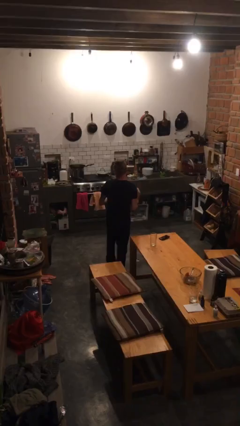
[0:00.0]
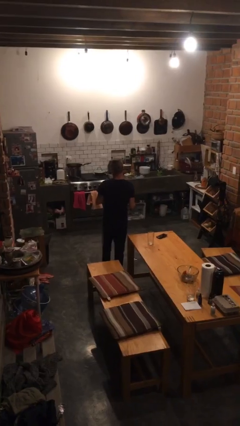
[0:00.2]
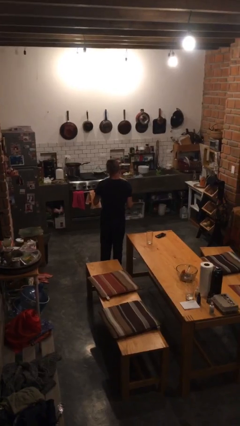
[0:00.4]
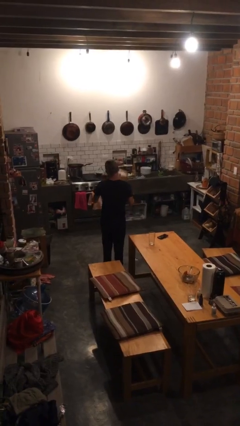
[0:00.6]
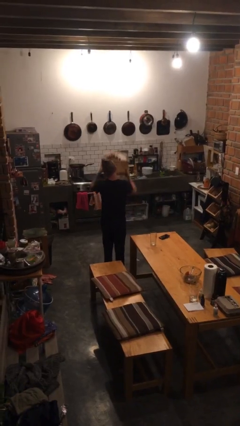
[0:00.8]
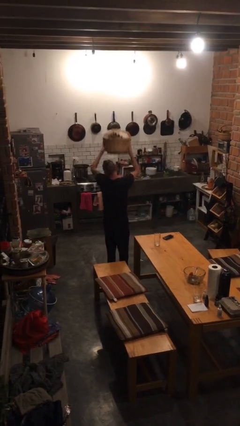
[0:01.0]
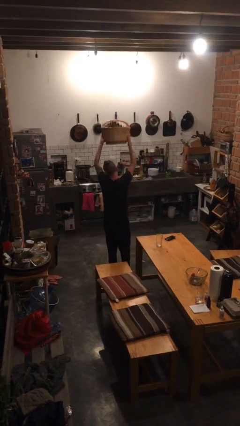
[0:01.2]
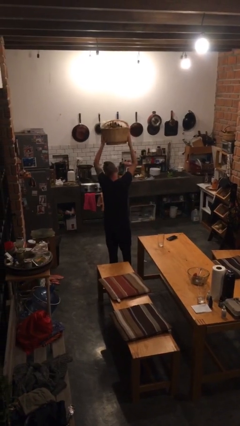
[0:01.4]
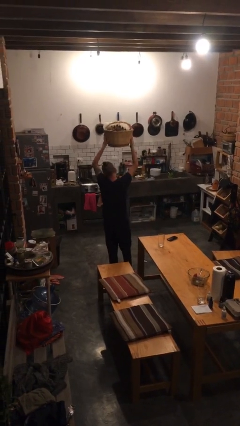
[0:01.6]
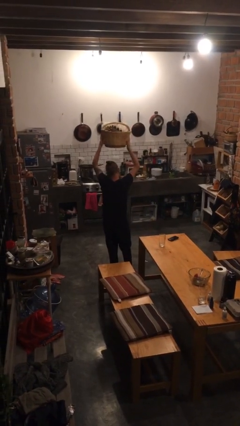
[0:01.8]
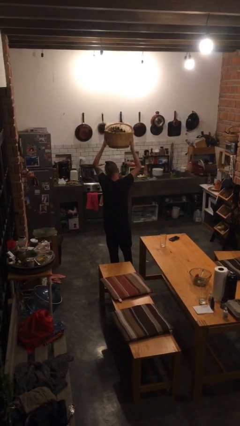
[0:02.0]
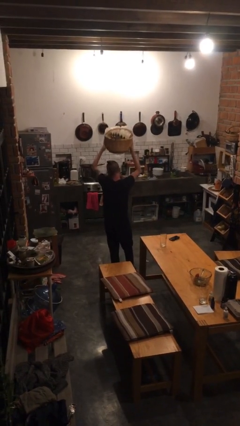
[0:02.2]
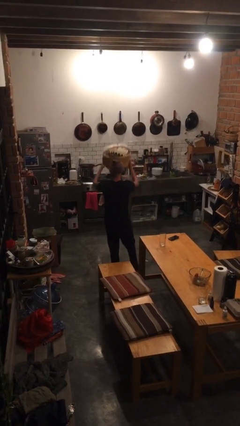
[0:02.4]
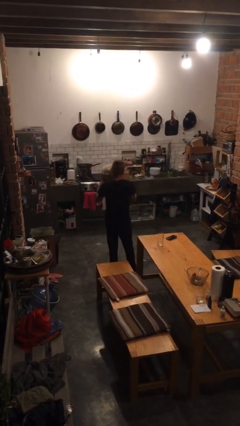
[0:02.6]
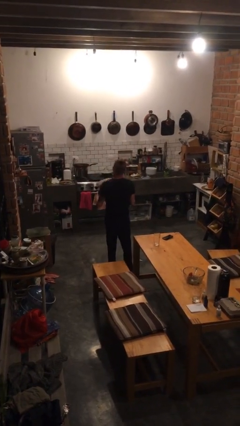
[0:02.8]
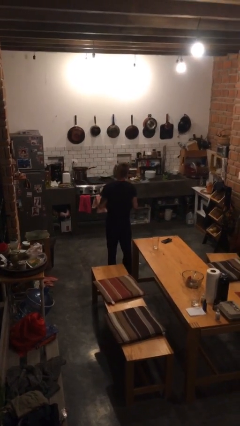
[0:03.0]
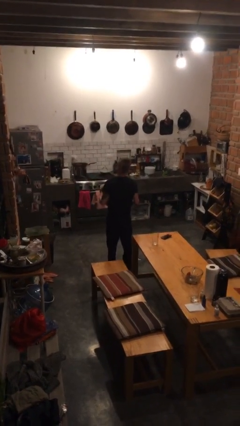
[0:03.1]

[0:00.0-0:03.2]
person holds object above head

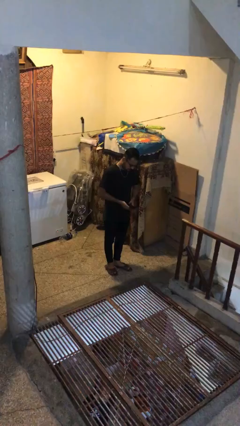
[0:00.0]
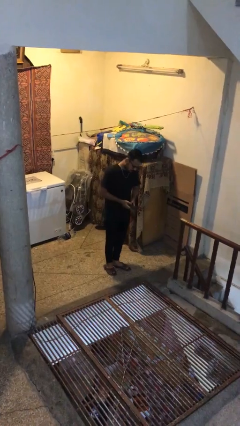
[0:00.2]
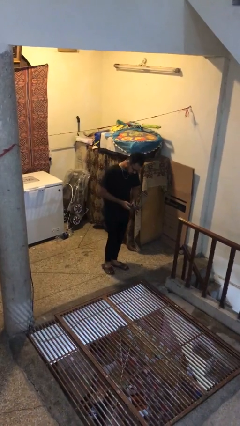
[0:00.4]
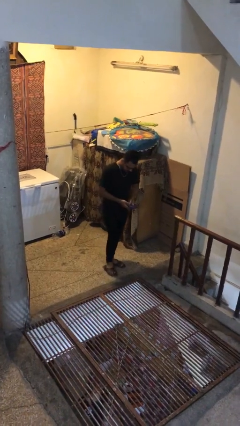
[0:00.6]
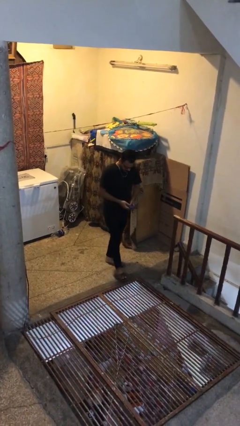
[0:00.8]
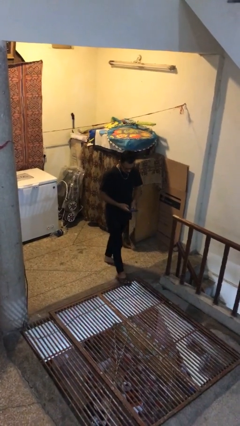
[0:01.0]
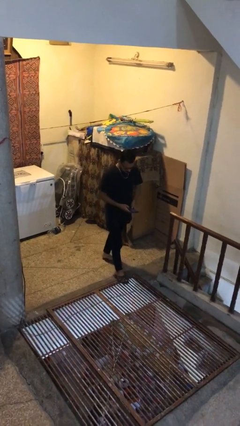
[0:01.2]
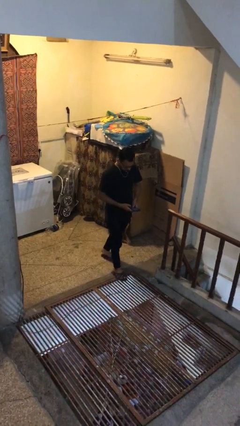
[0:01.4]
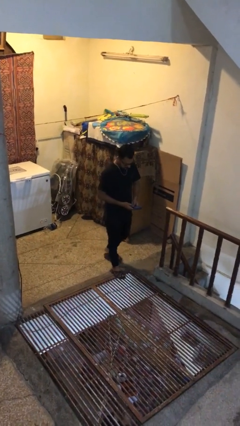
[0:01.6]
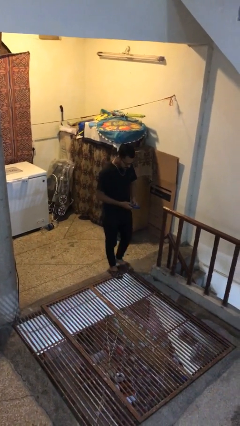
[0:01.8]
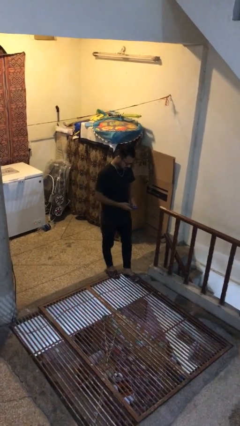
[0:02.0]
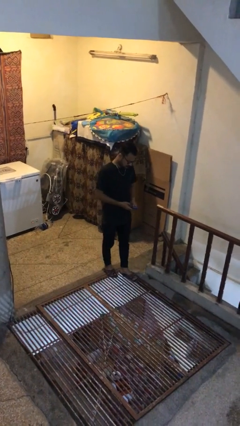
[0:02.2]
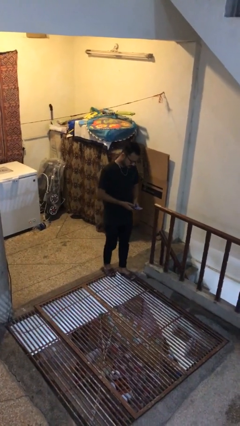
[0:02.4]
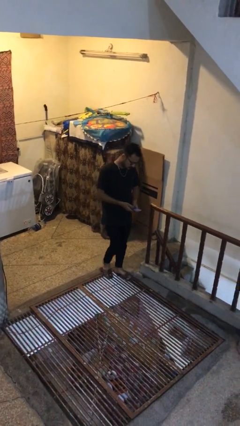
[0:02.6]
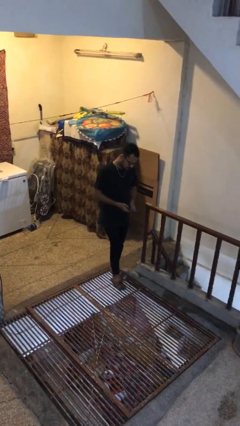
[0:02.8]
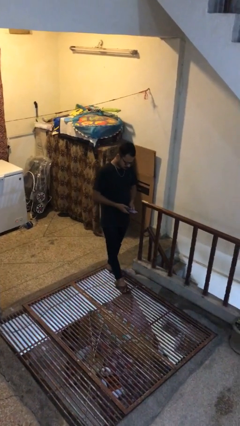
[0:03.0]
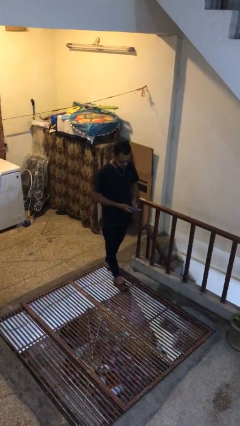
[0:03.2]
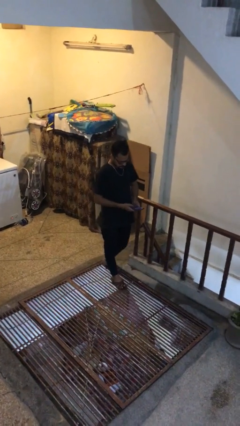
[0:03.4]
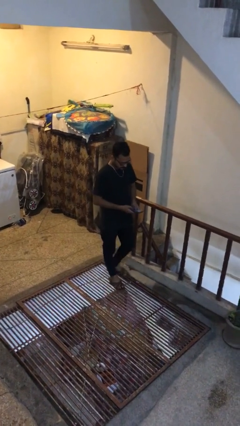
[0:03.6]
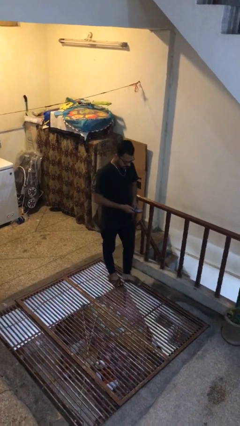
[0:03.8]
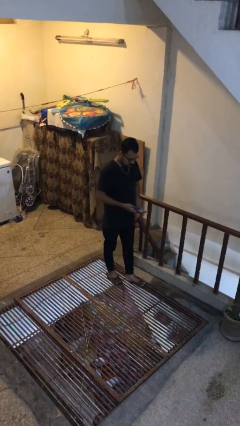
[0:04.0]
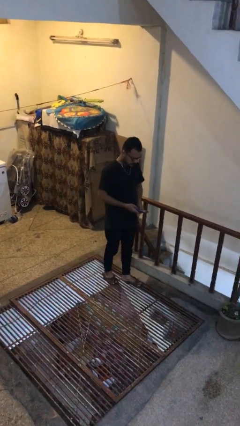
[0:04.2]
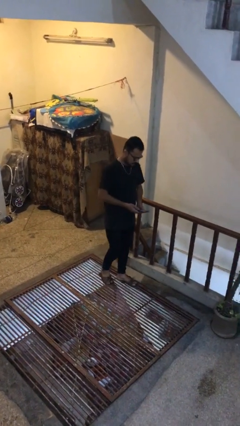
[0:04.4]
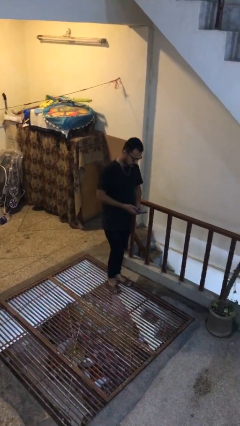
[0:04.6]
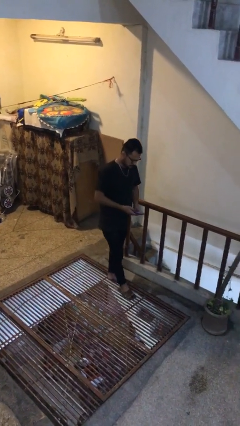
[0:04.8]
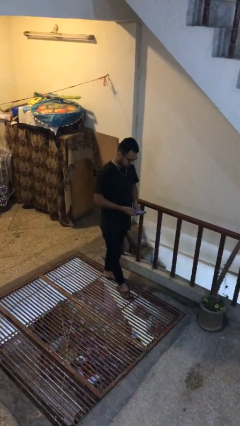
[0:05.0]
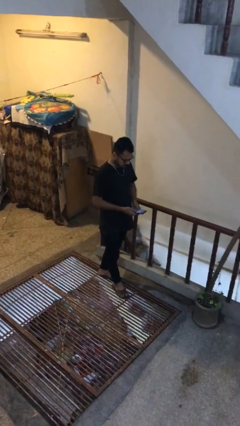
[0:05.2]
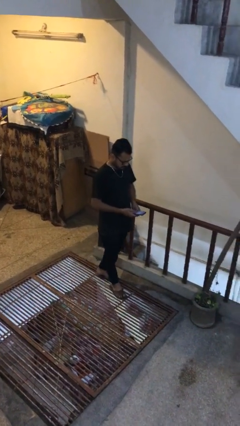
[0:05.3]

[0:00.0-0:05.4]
person texts on phone

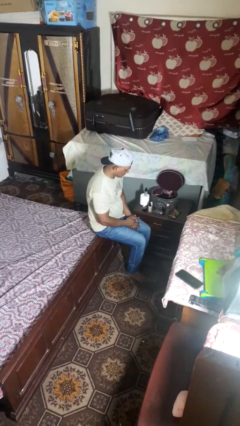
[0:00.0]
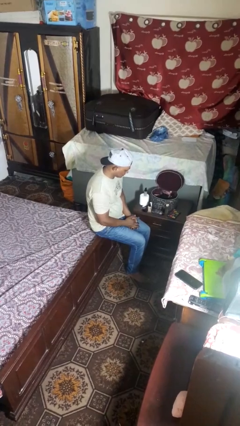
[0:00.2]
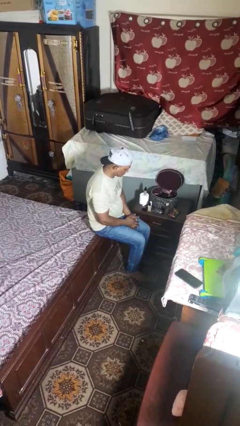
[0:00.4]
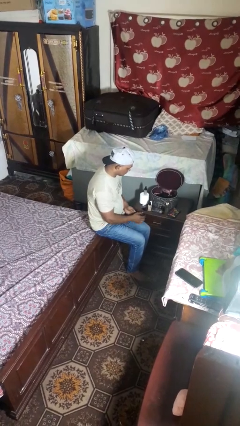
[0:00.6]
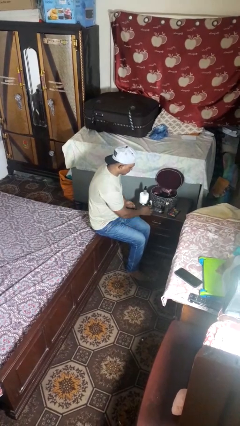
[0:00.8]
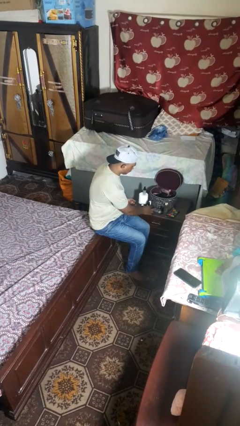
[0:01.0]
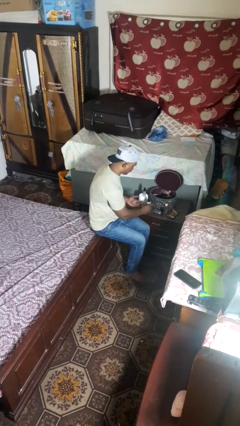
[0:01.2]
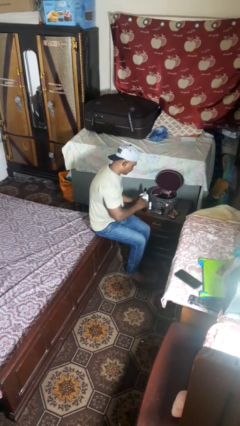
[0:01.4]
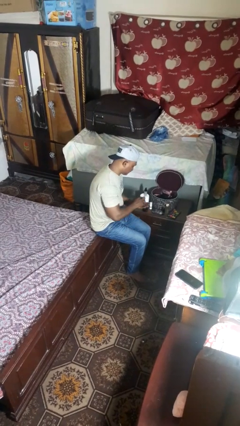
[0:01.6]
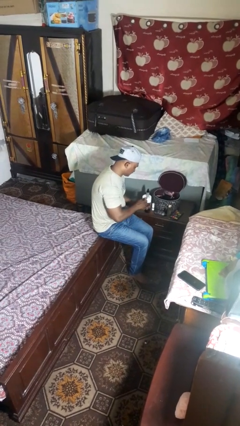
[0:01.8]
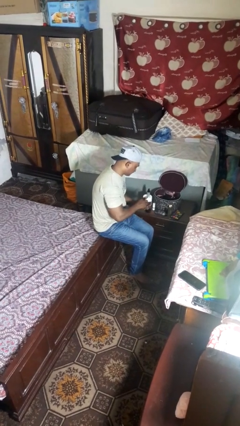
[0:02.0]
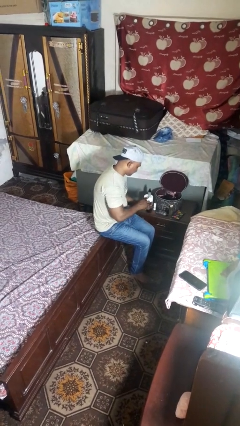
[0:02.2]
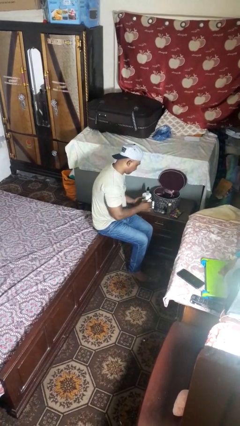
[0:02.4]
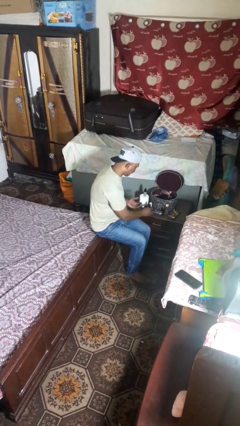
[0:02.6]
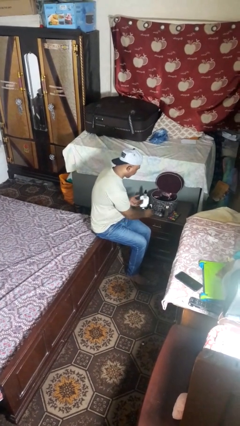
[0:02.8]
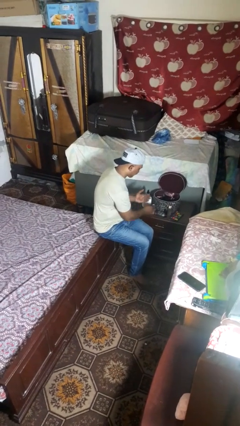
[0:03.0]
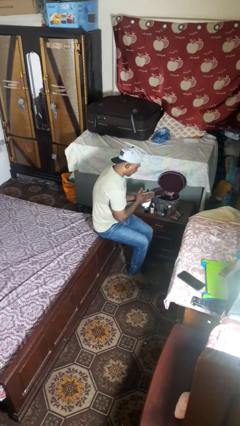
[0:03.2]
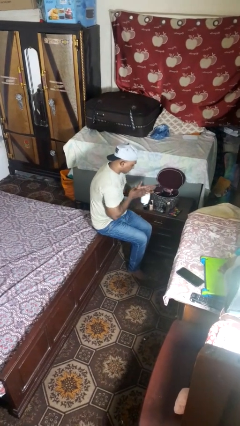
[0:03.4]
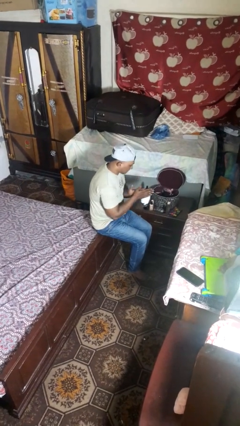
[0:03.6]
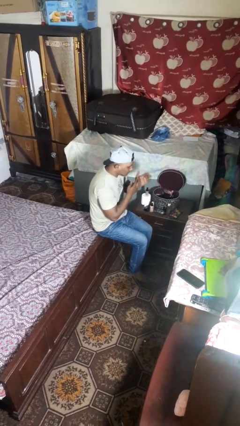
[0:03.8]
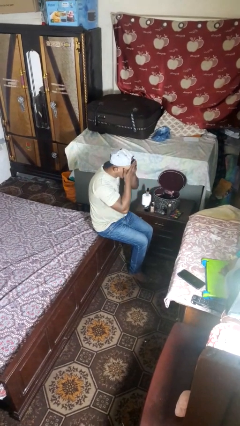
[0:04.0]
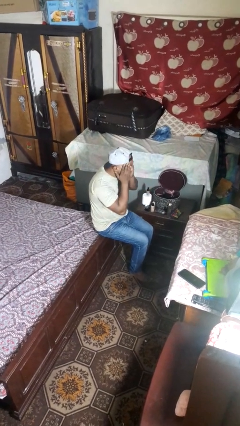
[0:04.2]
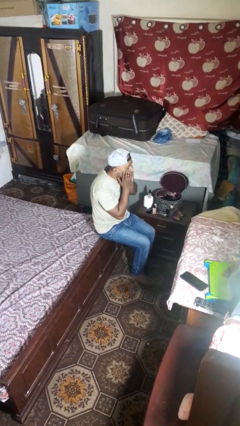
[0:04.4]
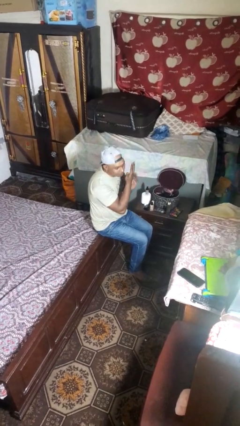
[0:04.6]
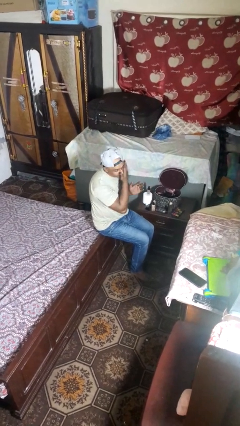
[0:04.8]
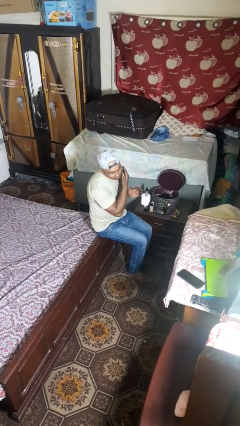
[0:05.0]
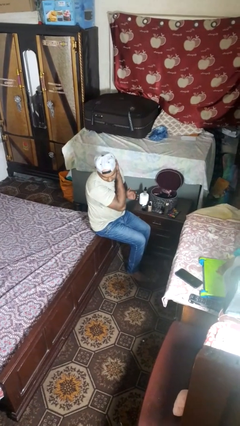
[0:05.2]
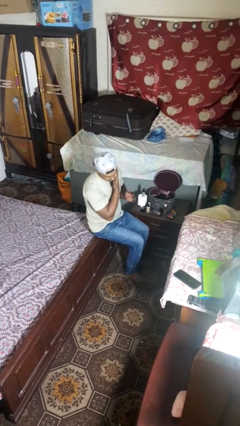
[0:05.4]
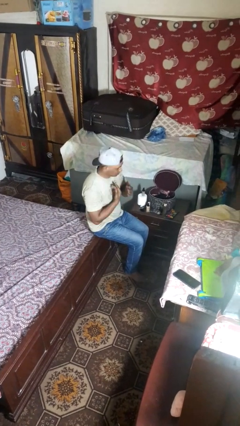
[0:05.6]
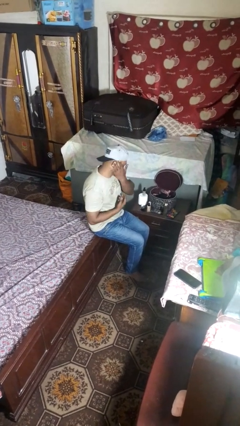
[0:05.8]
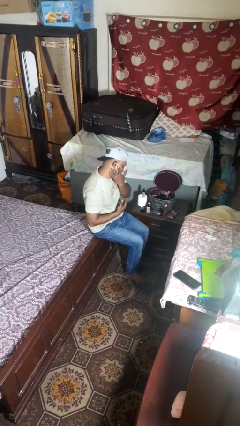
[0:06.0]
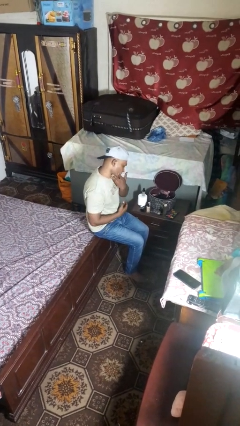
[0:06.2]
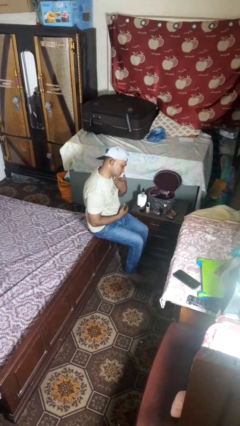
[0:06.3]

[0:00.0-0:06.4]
person applies foundation makeup

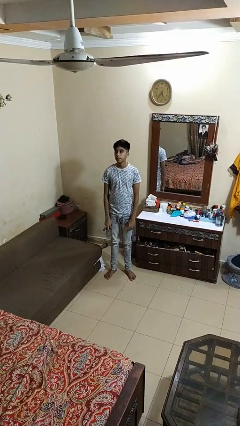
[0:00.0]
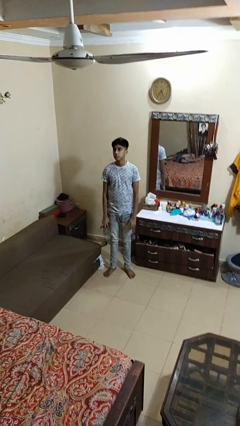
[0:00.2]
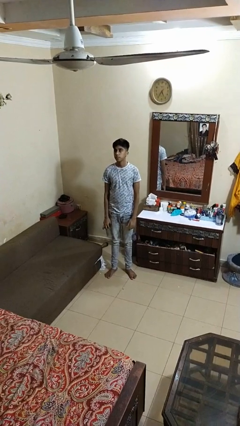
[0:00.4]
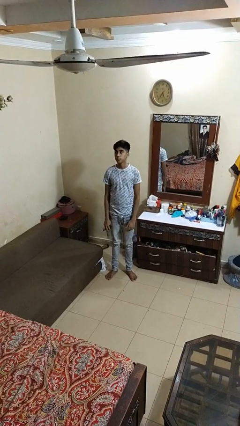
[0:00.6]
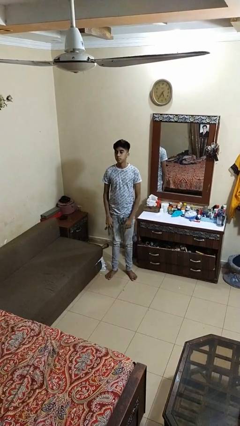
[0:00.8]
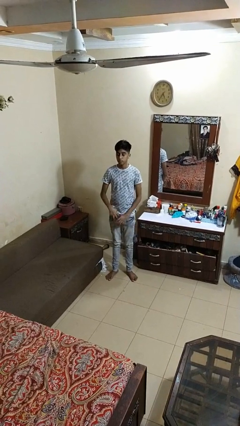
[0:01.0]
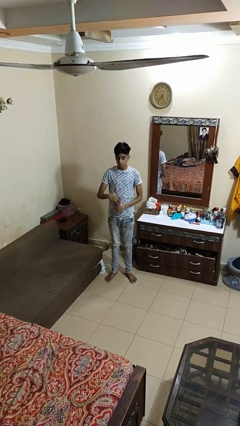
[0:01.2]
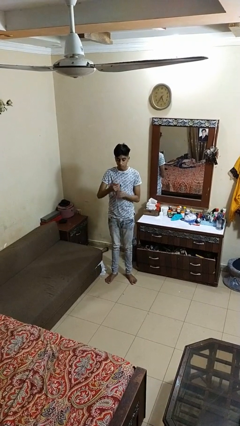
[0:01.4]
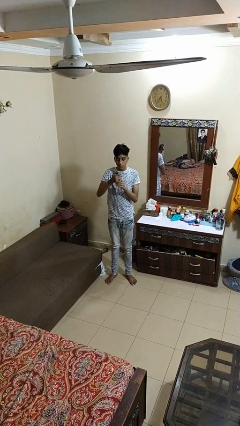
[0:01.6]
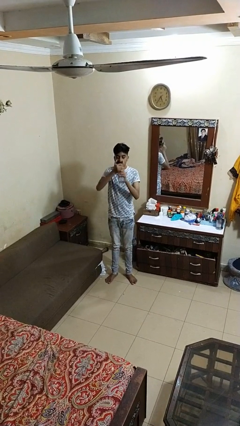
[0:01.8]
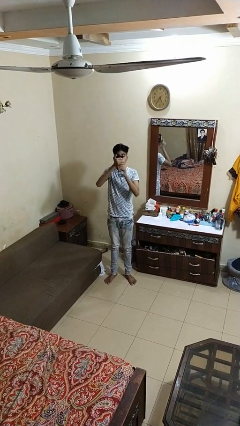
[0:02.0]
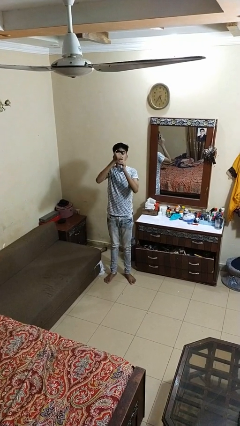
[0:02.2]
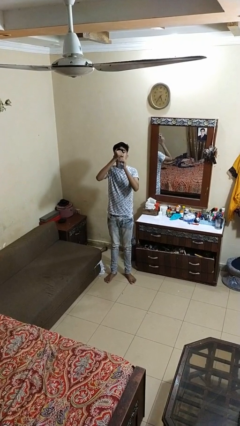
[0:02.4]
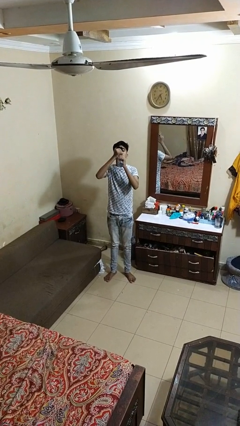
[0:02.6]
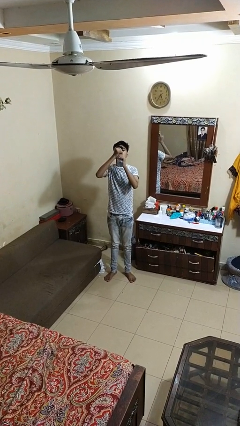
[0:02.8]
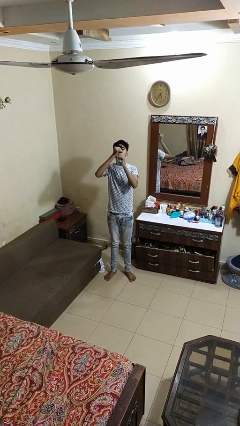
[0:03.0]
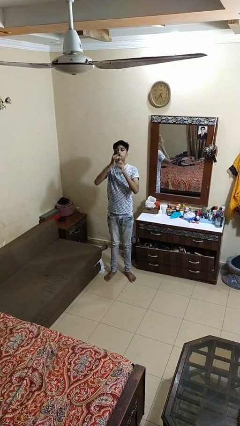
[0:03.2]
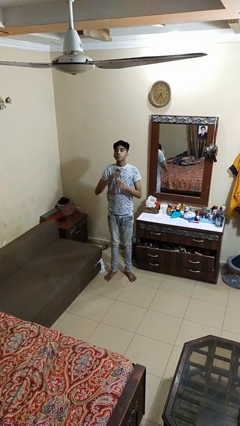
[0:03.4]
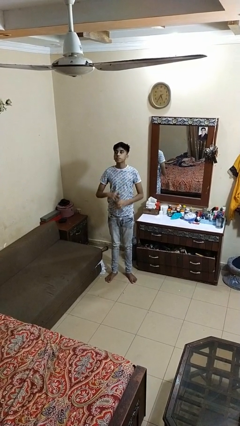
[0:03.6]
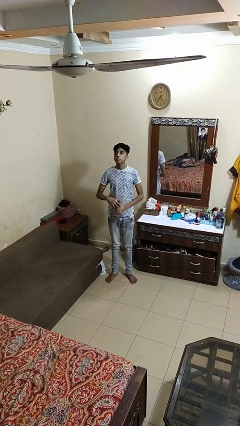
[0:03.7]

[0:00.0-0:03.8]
person drinks from bottle
